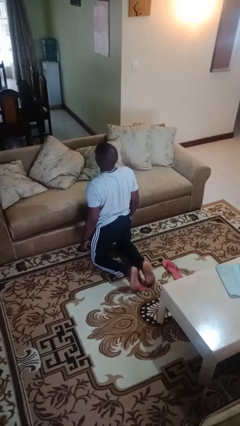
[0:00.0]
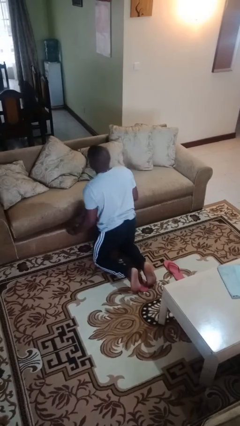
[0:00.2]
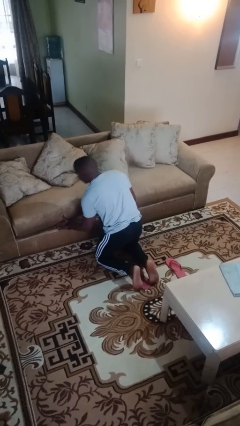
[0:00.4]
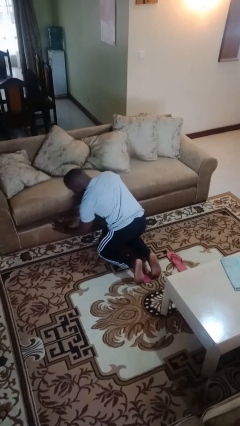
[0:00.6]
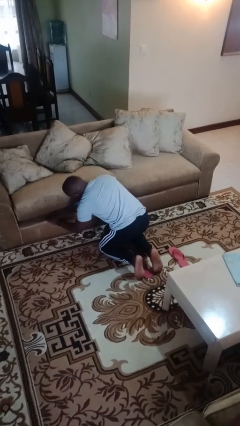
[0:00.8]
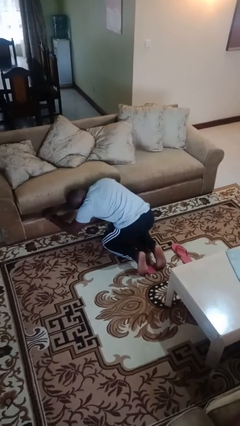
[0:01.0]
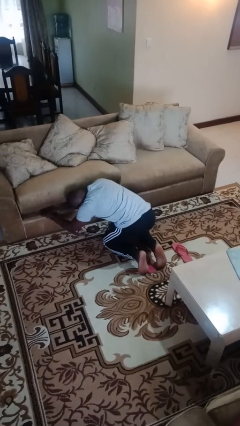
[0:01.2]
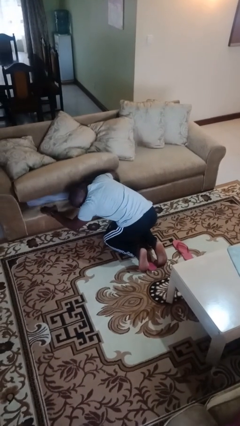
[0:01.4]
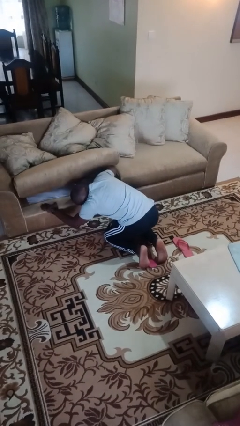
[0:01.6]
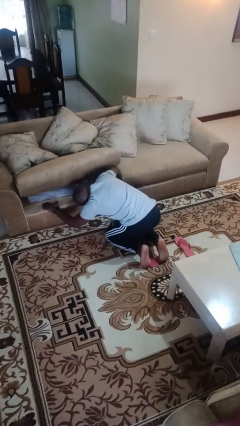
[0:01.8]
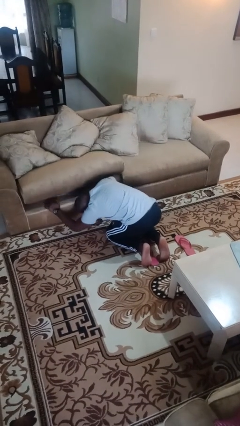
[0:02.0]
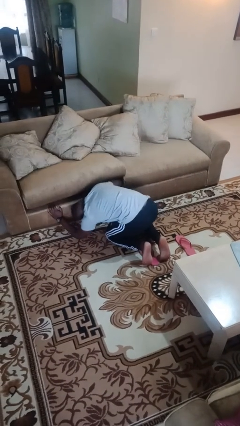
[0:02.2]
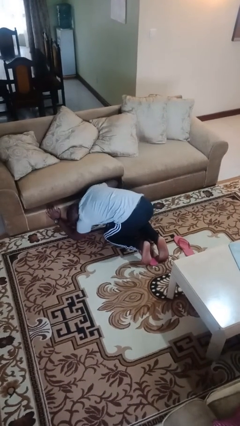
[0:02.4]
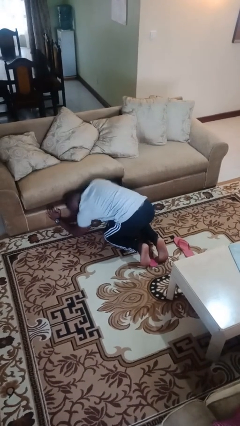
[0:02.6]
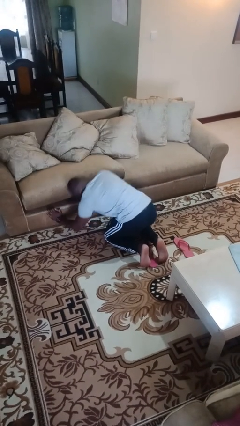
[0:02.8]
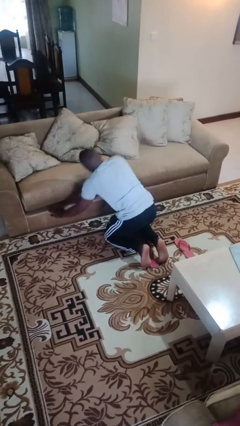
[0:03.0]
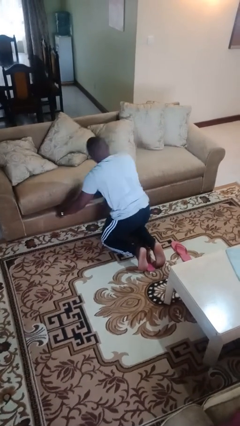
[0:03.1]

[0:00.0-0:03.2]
person searches under couch

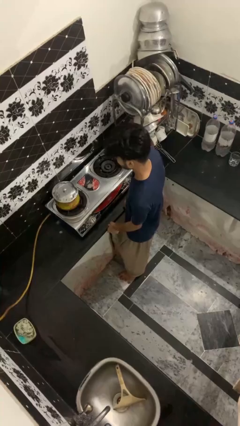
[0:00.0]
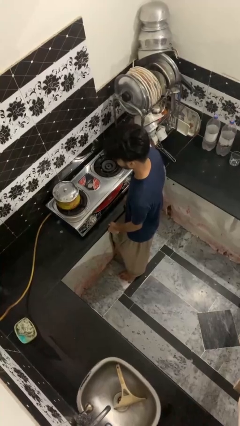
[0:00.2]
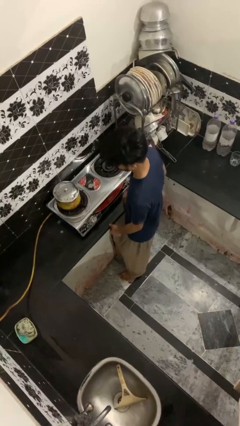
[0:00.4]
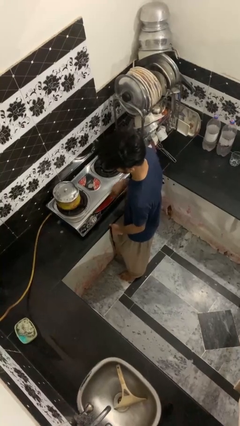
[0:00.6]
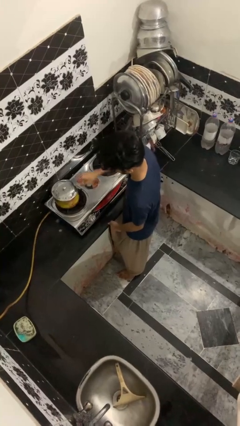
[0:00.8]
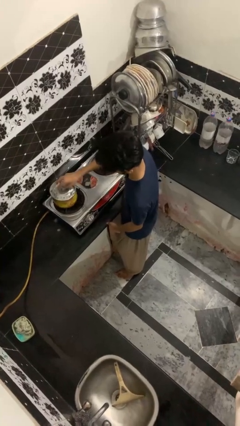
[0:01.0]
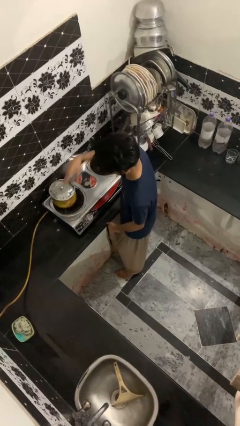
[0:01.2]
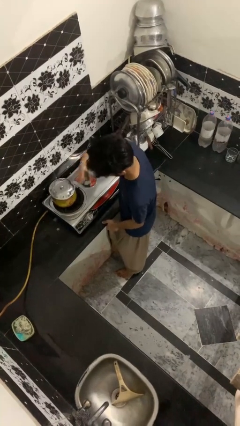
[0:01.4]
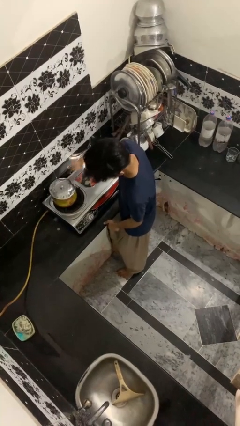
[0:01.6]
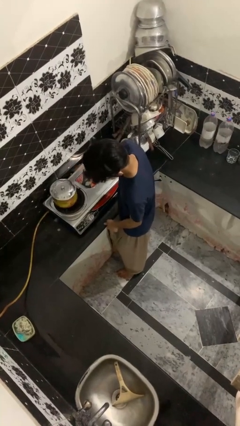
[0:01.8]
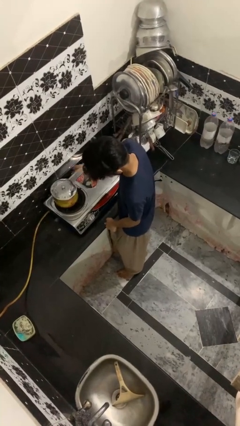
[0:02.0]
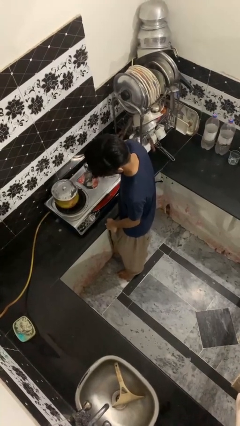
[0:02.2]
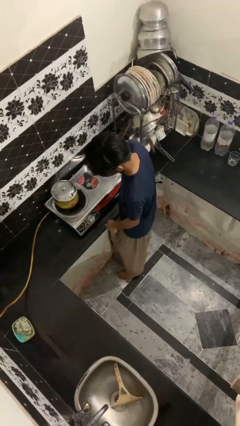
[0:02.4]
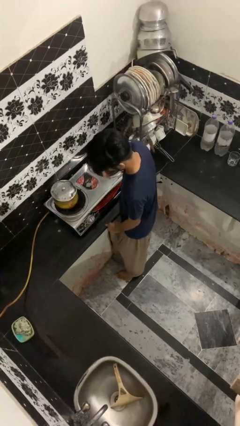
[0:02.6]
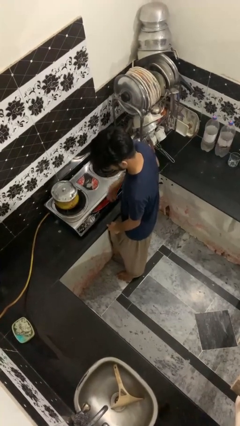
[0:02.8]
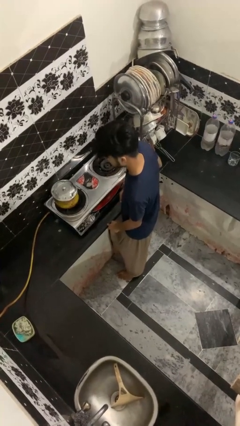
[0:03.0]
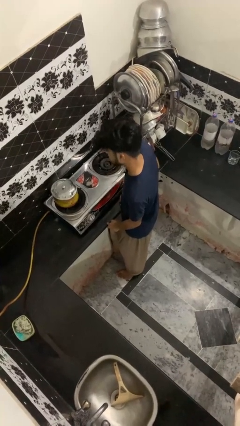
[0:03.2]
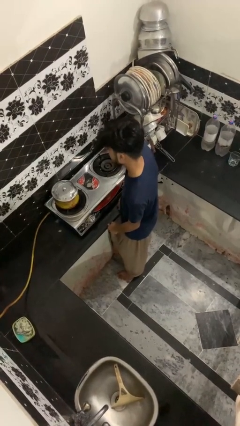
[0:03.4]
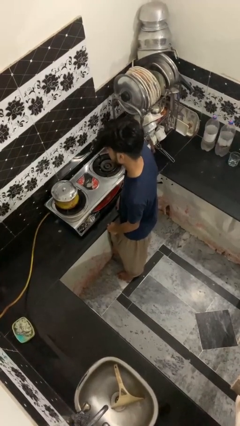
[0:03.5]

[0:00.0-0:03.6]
person burns hand

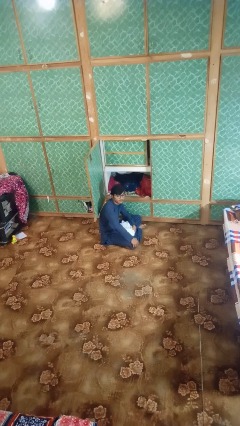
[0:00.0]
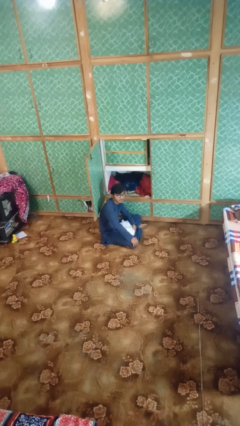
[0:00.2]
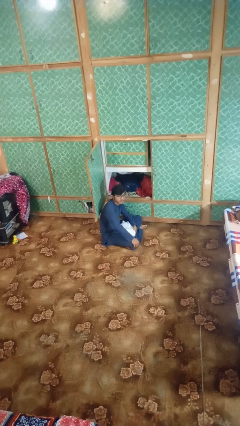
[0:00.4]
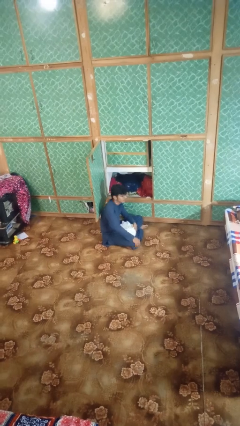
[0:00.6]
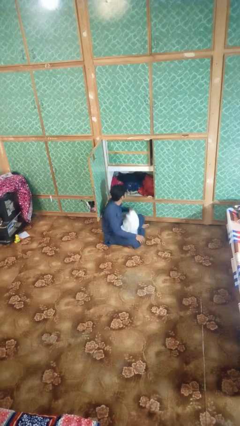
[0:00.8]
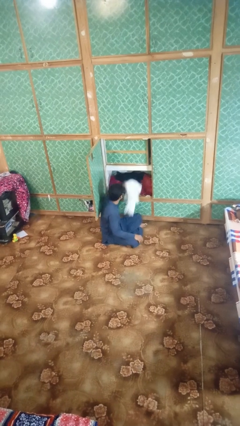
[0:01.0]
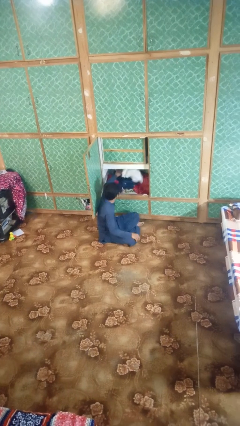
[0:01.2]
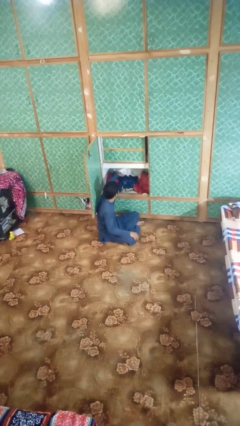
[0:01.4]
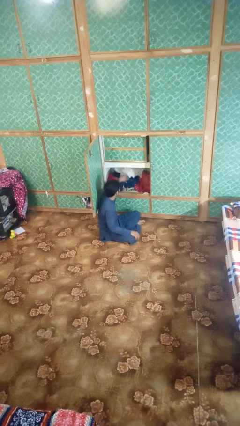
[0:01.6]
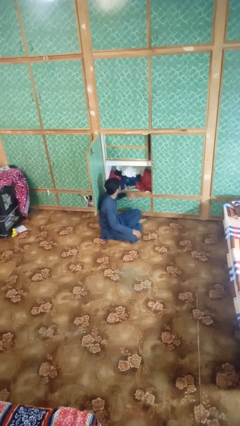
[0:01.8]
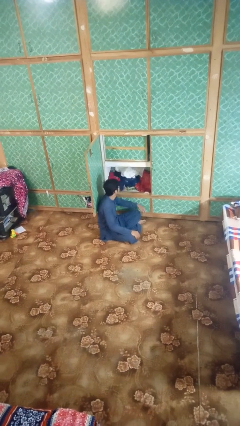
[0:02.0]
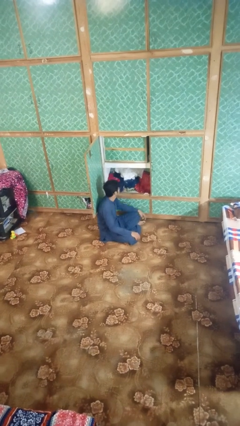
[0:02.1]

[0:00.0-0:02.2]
person puts clothes into dresser

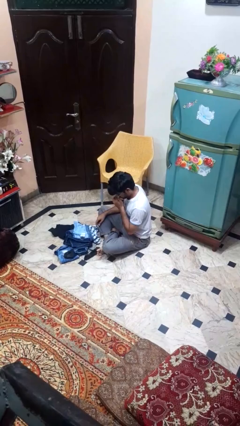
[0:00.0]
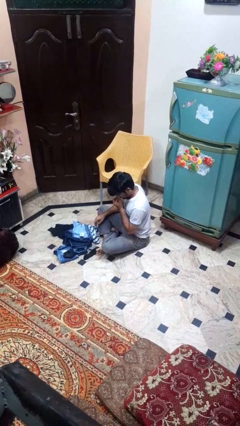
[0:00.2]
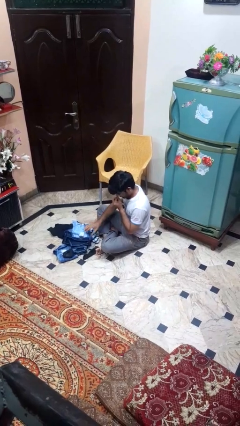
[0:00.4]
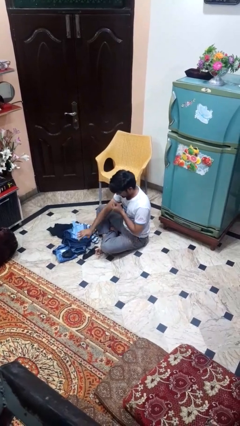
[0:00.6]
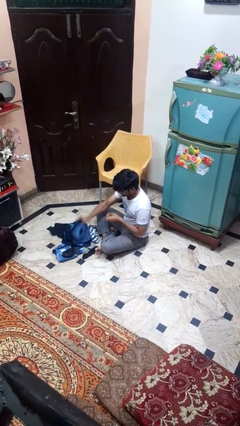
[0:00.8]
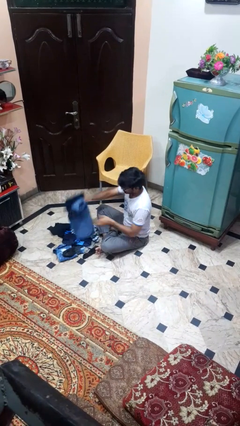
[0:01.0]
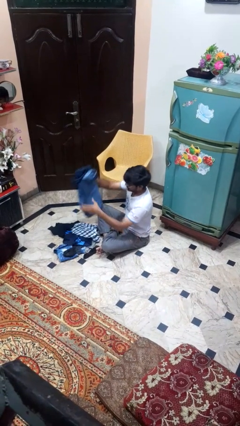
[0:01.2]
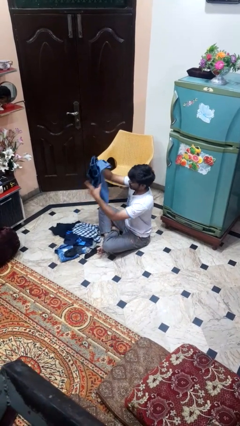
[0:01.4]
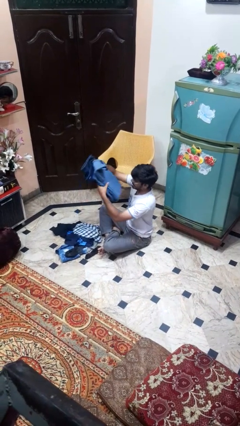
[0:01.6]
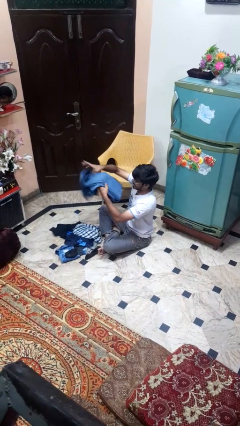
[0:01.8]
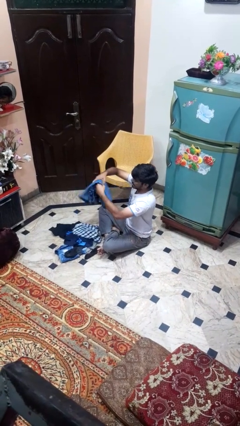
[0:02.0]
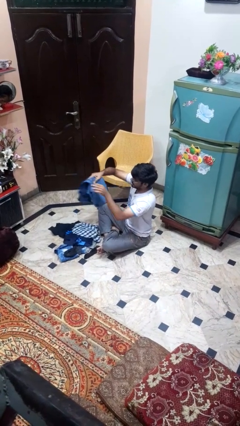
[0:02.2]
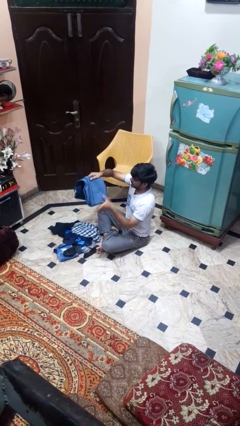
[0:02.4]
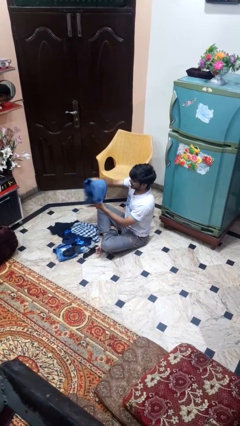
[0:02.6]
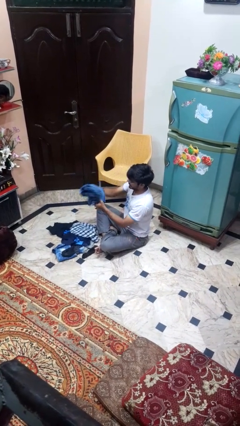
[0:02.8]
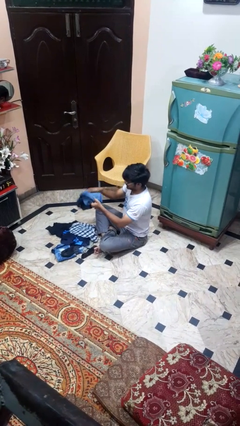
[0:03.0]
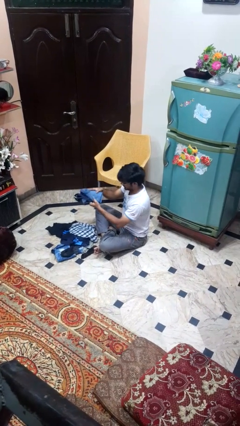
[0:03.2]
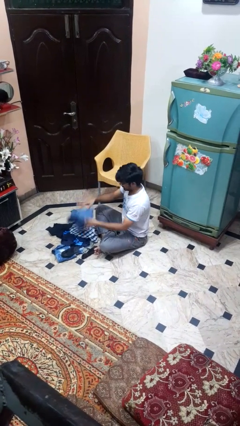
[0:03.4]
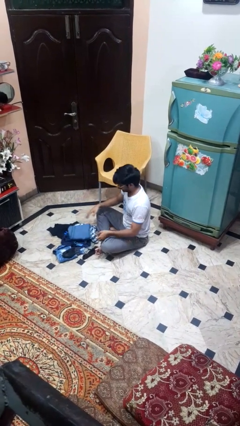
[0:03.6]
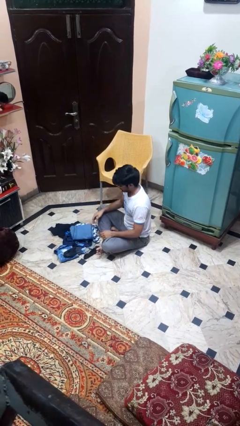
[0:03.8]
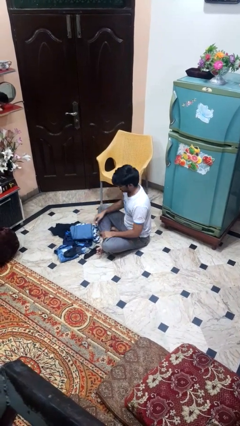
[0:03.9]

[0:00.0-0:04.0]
person folds pants

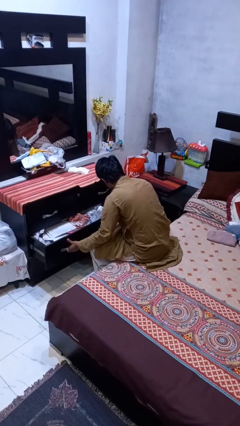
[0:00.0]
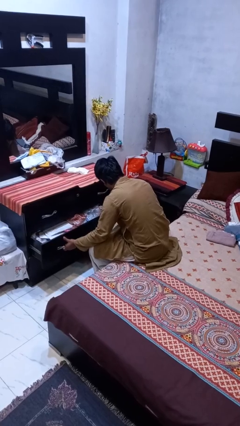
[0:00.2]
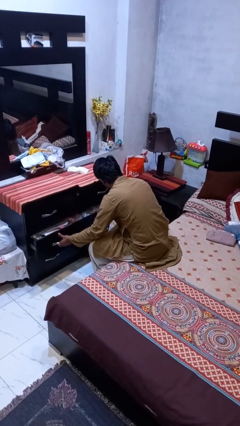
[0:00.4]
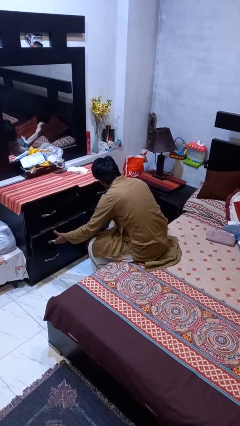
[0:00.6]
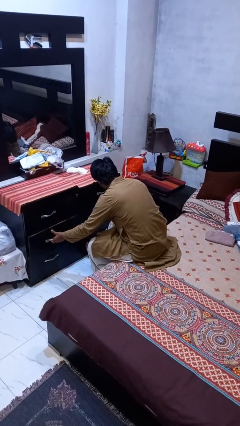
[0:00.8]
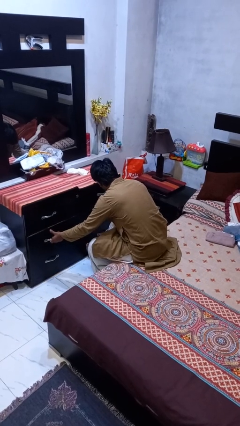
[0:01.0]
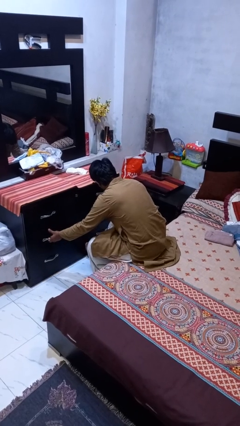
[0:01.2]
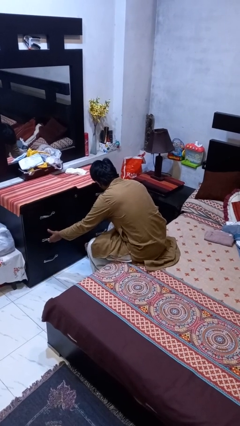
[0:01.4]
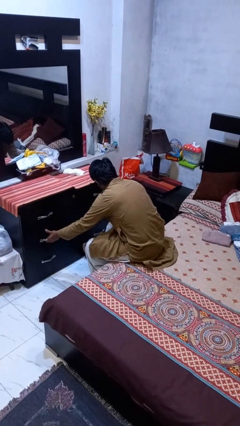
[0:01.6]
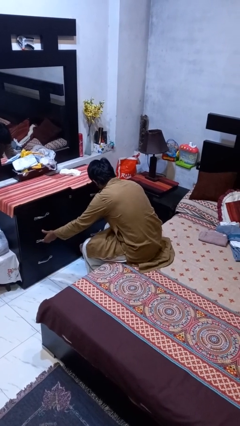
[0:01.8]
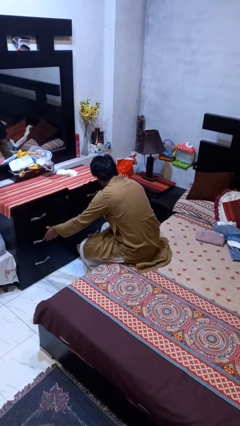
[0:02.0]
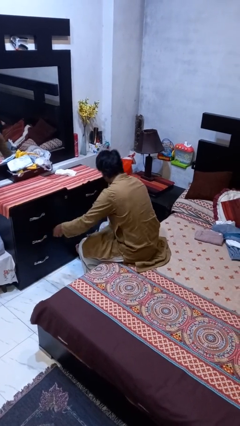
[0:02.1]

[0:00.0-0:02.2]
person closes dresser drawer

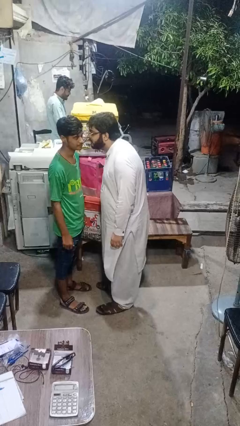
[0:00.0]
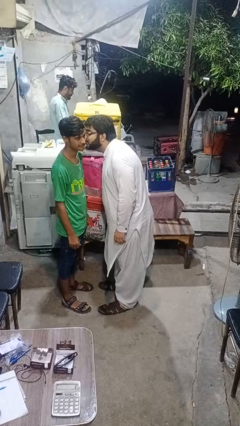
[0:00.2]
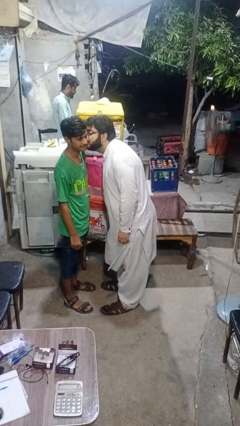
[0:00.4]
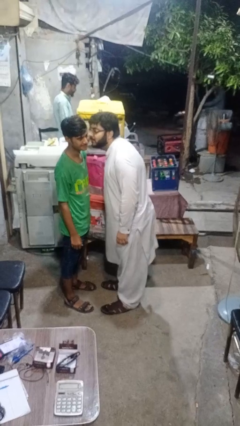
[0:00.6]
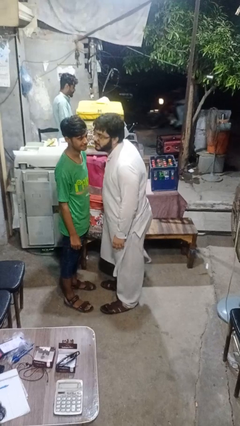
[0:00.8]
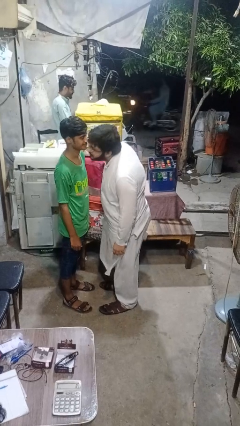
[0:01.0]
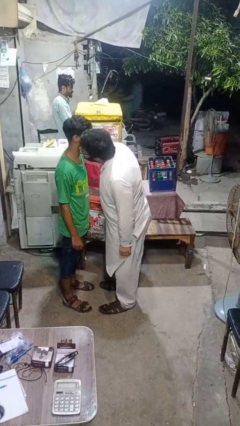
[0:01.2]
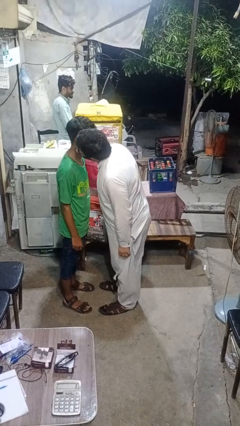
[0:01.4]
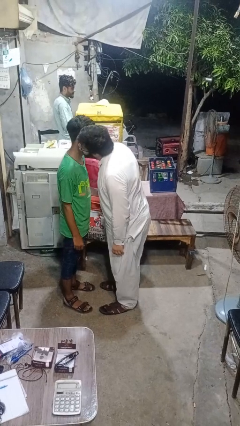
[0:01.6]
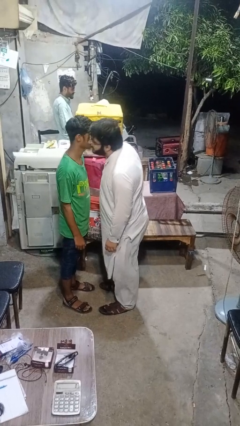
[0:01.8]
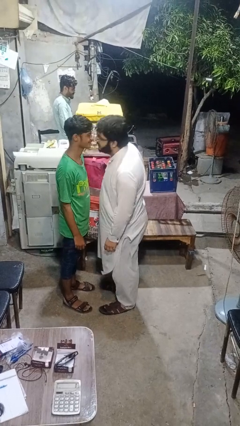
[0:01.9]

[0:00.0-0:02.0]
person kisses cheek of person
